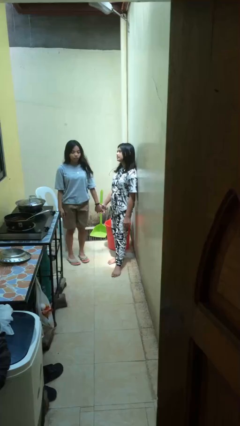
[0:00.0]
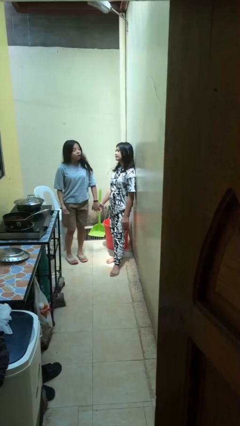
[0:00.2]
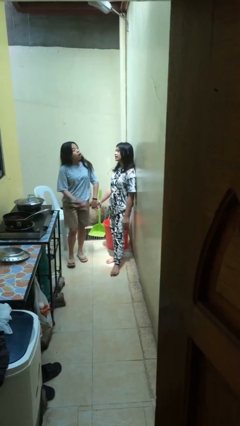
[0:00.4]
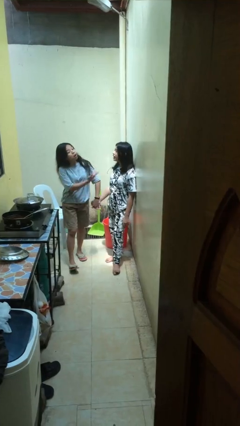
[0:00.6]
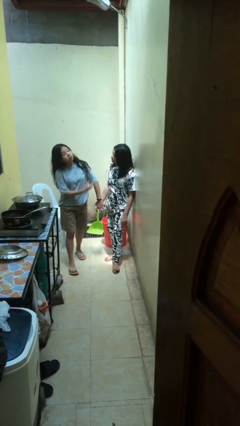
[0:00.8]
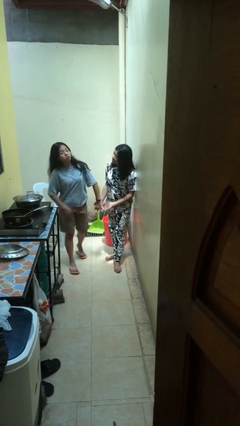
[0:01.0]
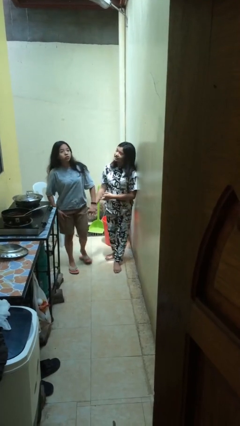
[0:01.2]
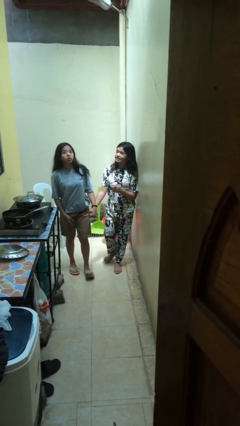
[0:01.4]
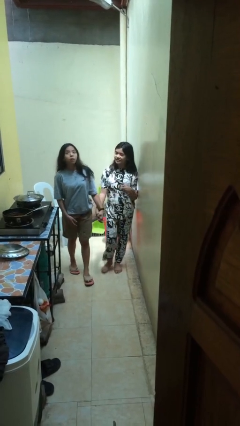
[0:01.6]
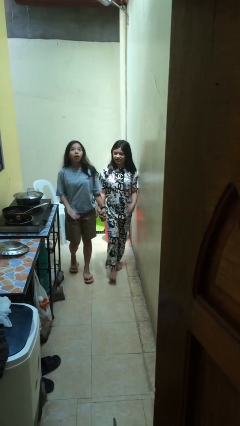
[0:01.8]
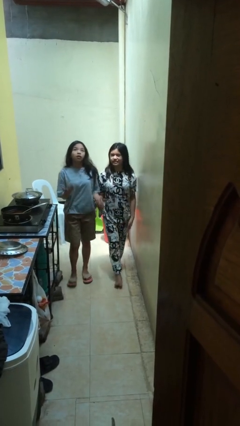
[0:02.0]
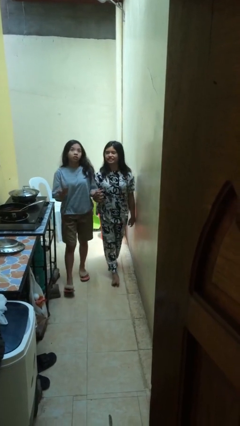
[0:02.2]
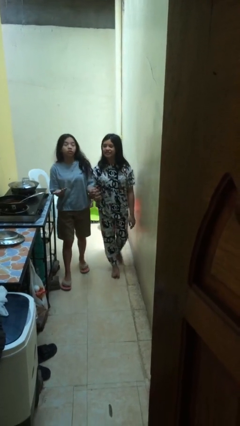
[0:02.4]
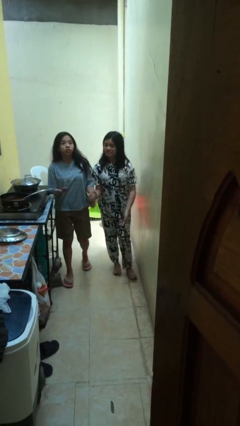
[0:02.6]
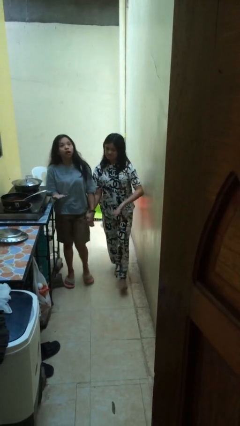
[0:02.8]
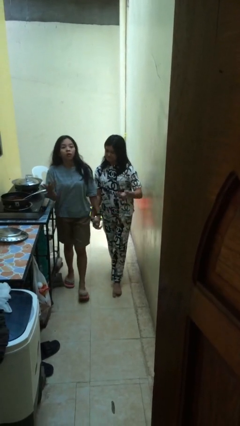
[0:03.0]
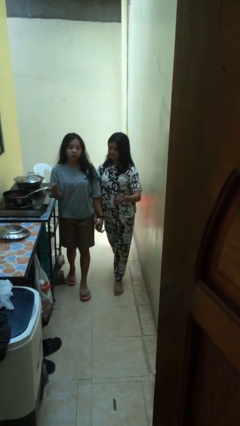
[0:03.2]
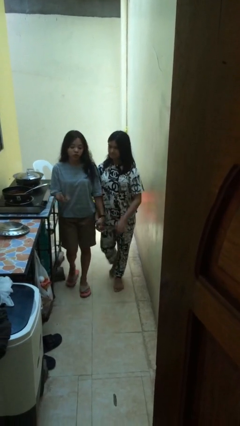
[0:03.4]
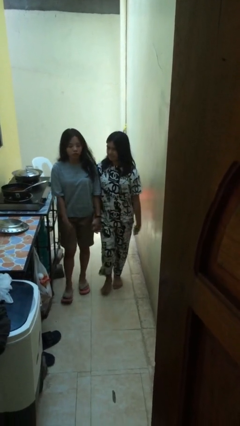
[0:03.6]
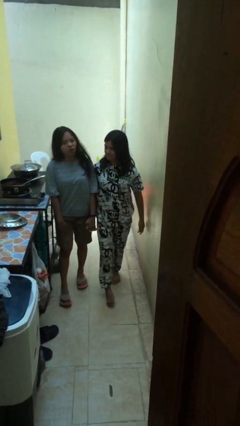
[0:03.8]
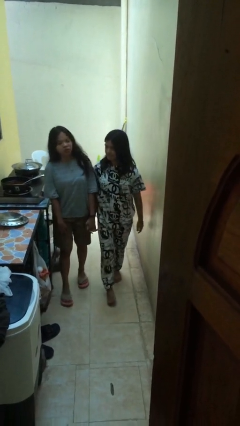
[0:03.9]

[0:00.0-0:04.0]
person holds hand

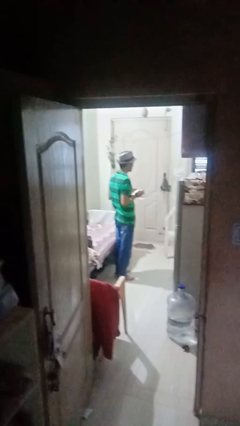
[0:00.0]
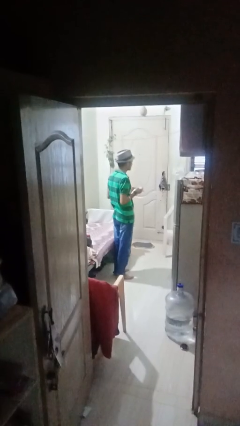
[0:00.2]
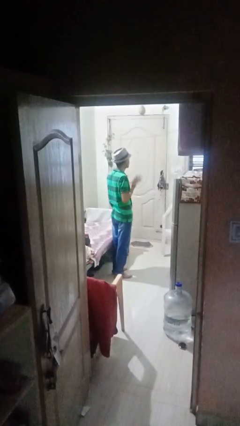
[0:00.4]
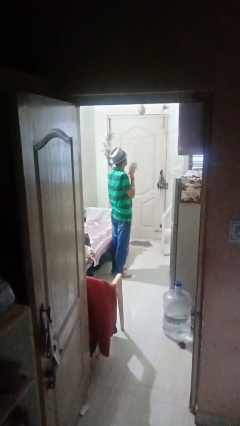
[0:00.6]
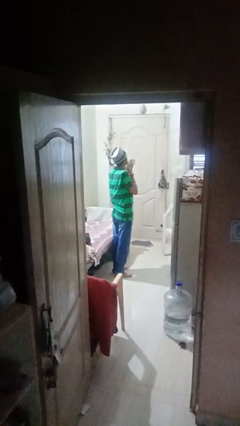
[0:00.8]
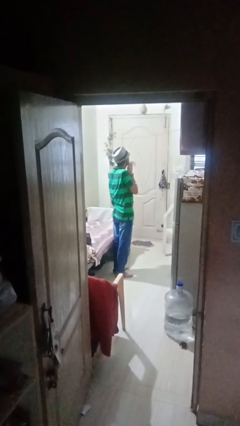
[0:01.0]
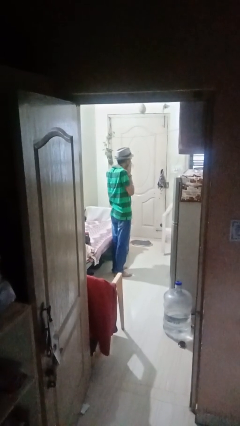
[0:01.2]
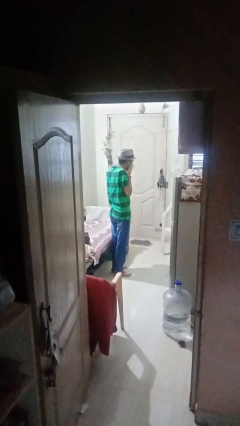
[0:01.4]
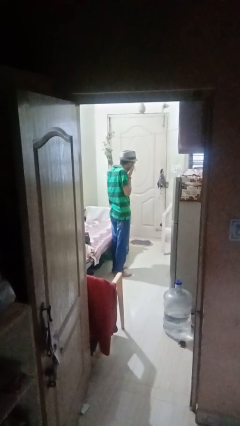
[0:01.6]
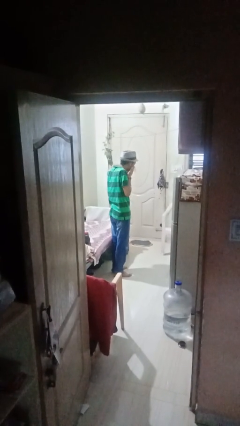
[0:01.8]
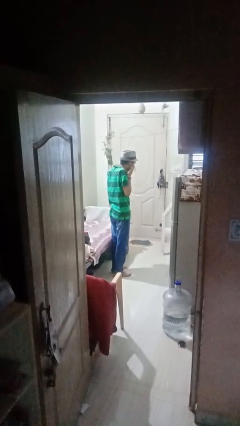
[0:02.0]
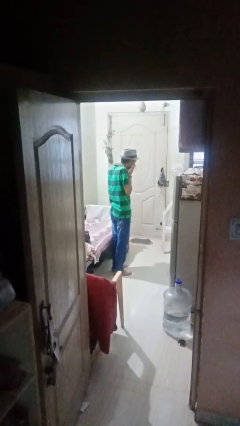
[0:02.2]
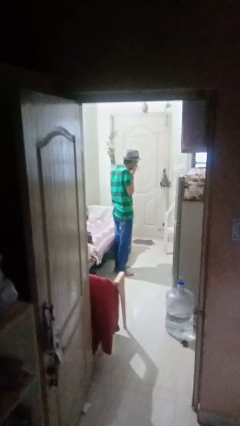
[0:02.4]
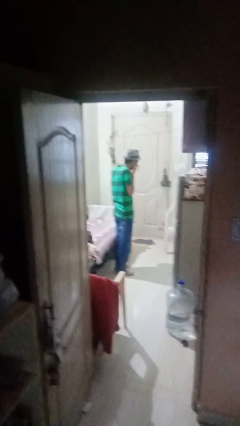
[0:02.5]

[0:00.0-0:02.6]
person blows nose

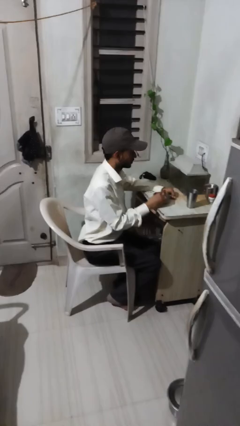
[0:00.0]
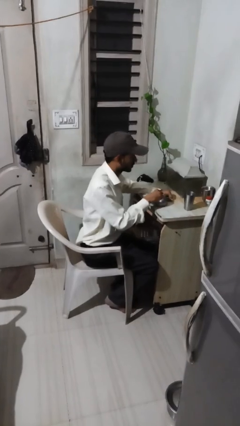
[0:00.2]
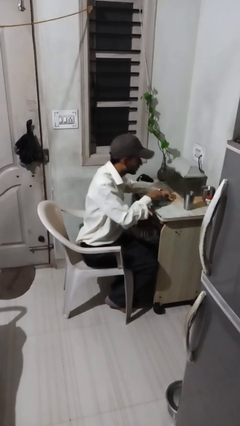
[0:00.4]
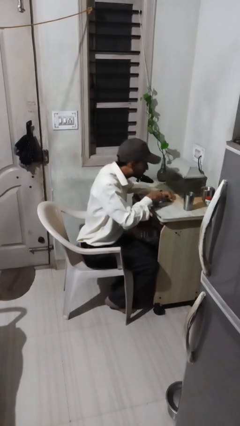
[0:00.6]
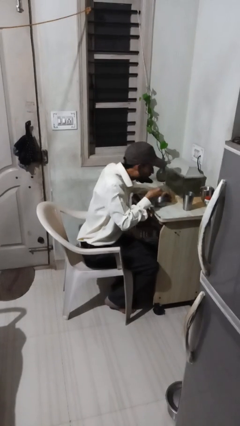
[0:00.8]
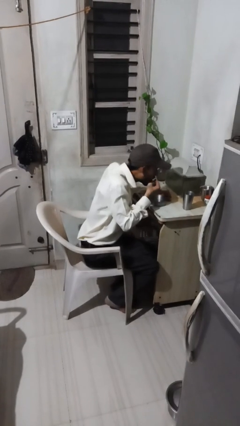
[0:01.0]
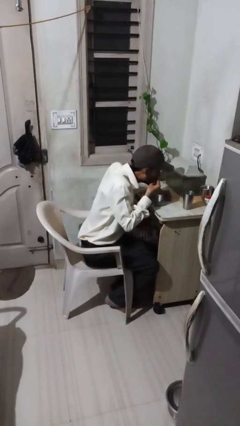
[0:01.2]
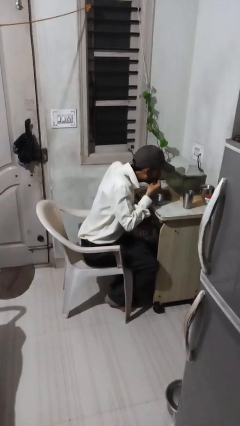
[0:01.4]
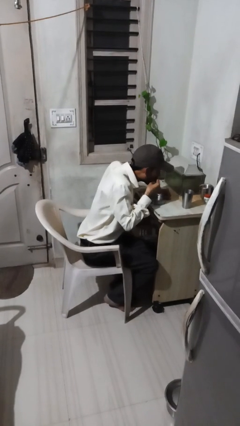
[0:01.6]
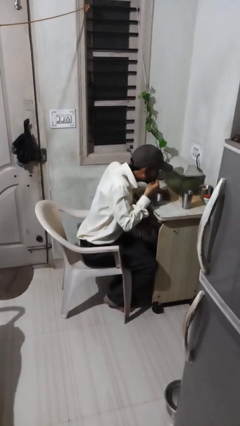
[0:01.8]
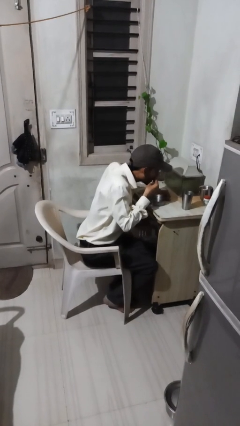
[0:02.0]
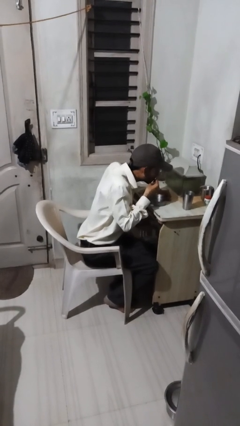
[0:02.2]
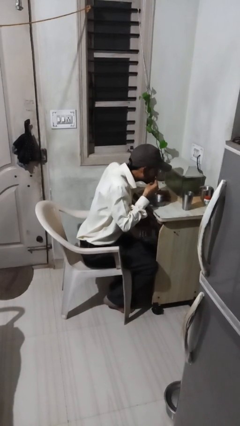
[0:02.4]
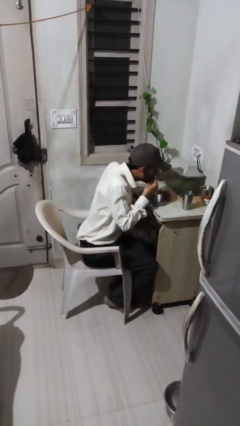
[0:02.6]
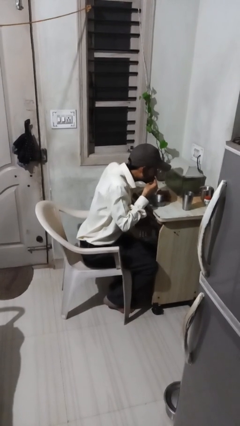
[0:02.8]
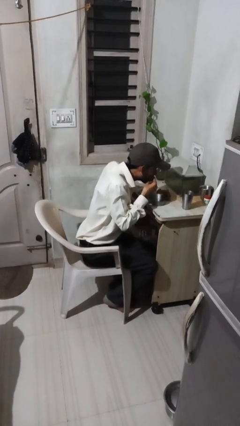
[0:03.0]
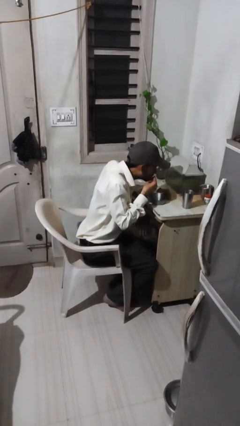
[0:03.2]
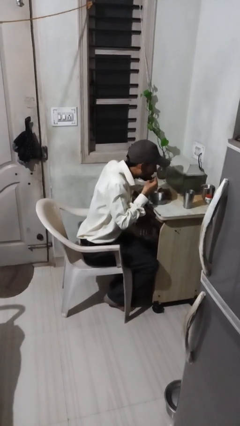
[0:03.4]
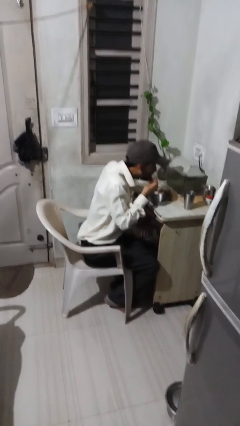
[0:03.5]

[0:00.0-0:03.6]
person eats with hands

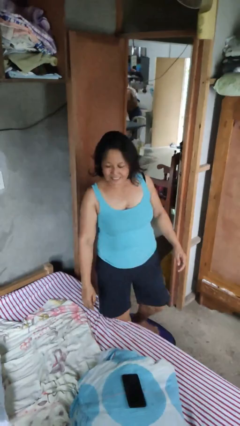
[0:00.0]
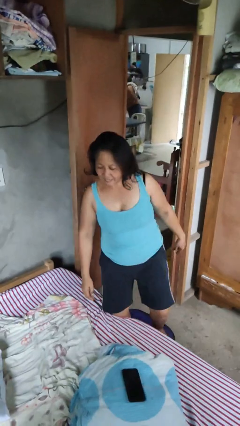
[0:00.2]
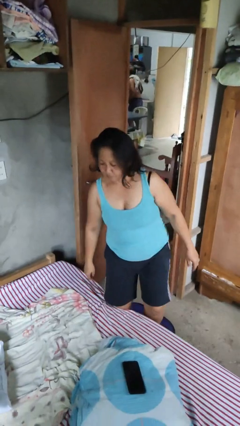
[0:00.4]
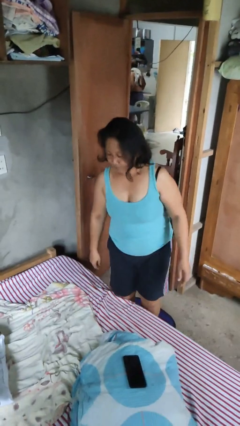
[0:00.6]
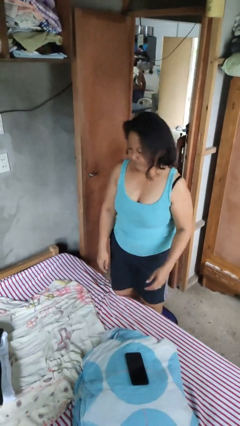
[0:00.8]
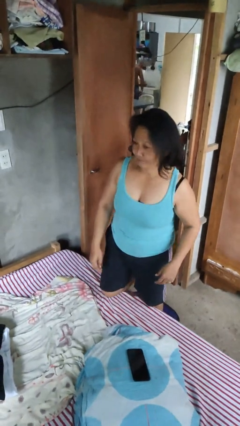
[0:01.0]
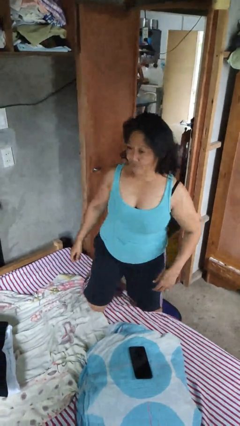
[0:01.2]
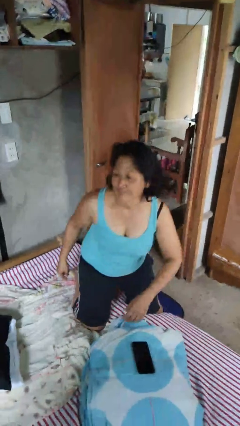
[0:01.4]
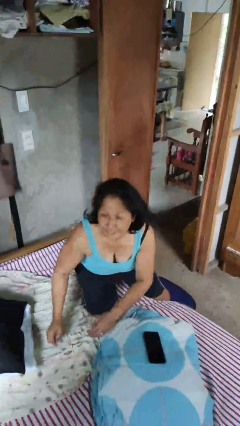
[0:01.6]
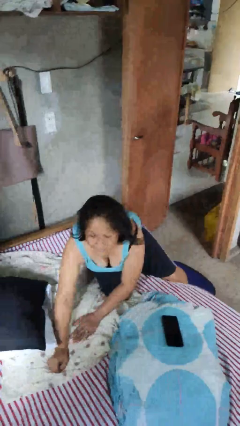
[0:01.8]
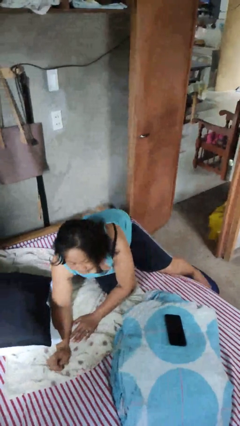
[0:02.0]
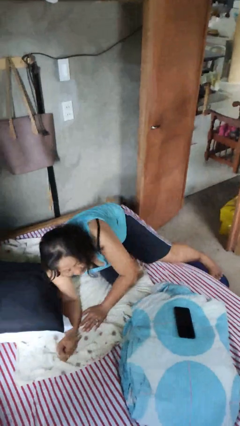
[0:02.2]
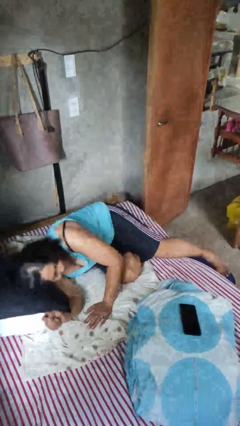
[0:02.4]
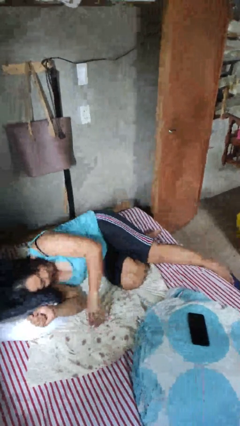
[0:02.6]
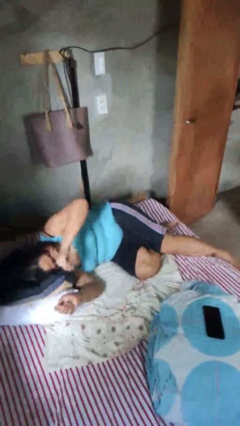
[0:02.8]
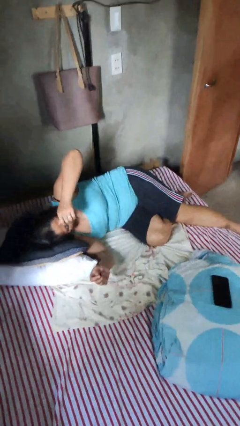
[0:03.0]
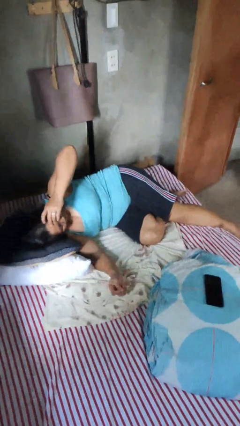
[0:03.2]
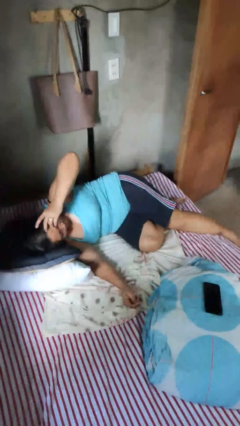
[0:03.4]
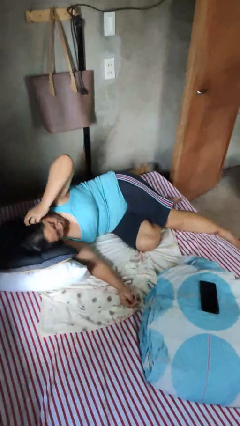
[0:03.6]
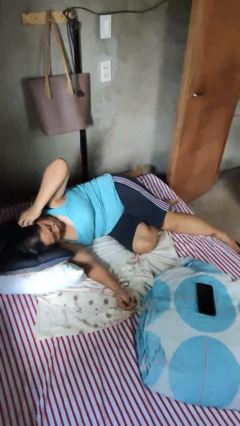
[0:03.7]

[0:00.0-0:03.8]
person lies down on bed

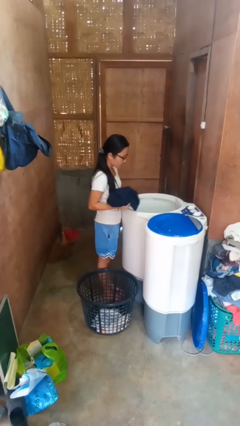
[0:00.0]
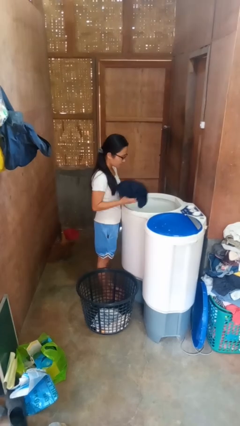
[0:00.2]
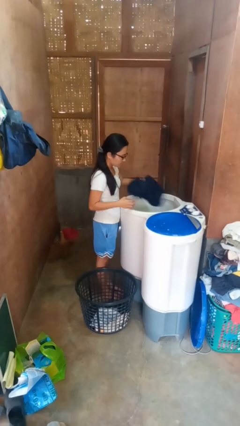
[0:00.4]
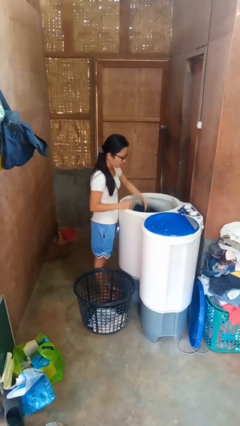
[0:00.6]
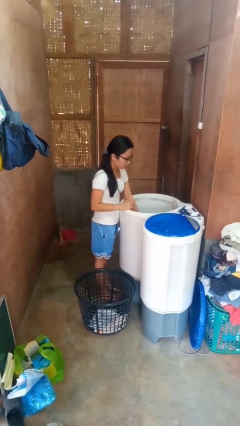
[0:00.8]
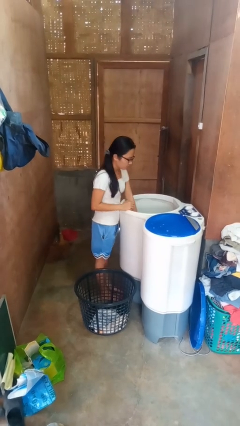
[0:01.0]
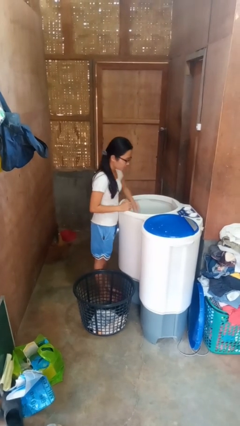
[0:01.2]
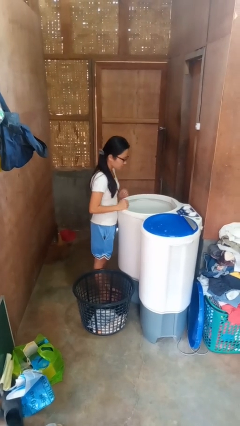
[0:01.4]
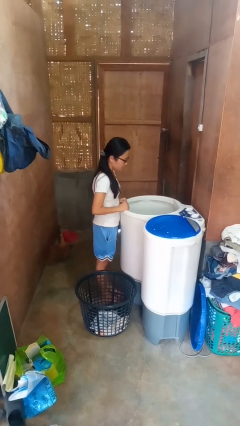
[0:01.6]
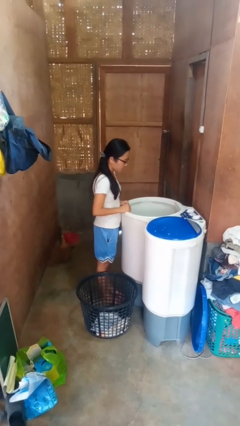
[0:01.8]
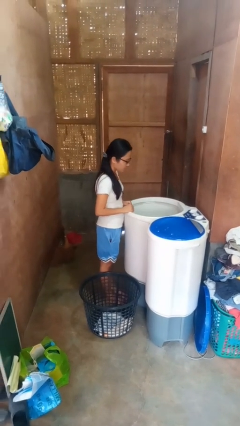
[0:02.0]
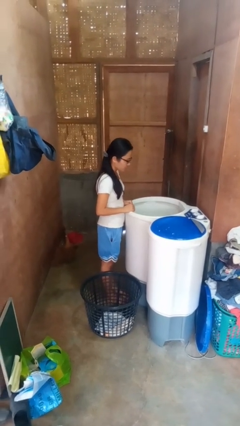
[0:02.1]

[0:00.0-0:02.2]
person loads clotheswasher

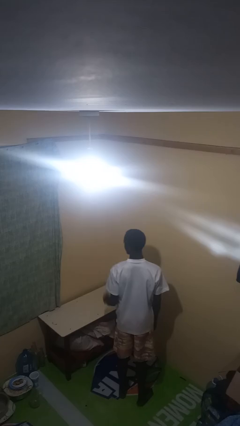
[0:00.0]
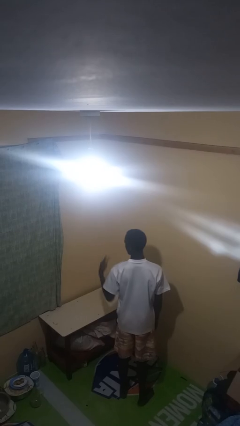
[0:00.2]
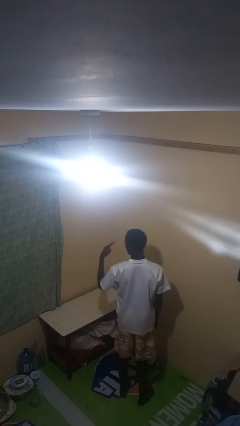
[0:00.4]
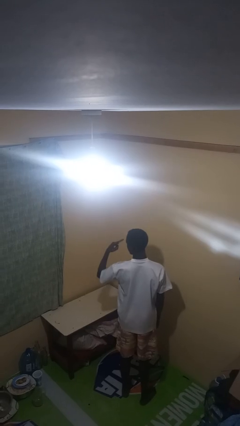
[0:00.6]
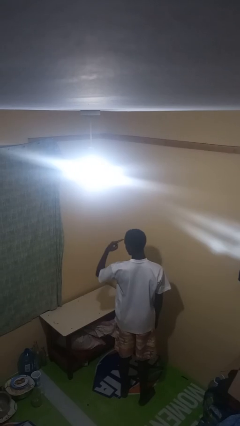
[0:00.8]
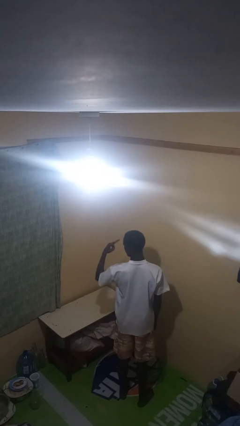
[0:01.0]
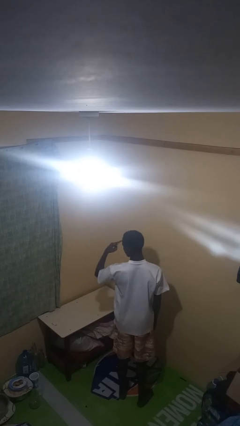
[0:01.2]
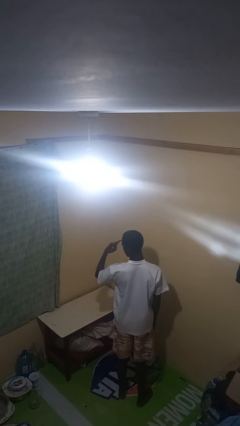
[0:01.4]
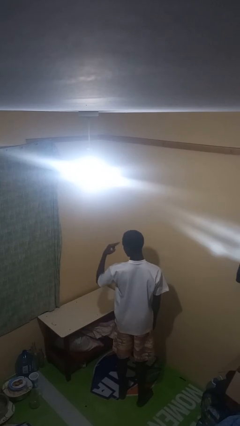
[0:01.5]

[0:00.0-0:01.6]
person gestures watch closely
